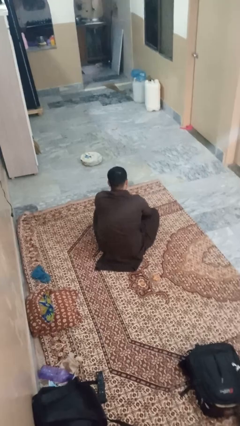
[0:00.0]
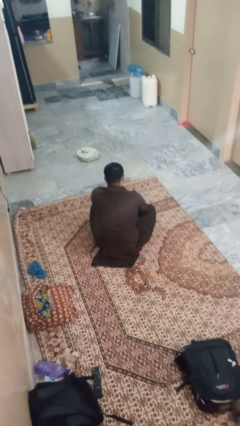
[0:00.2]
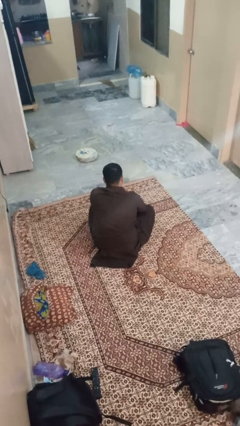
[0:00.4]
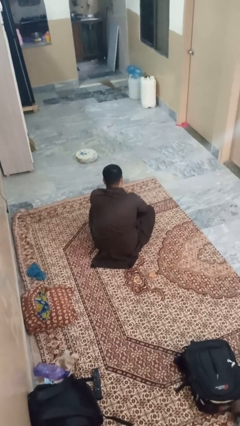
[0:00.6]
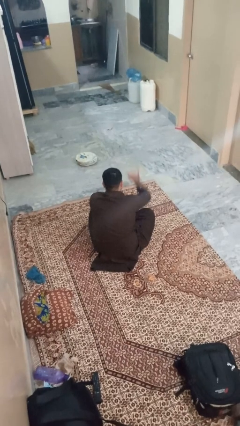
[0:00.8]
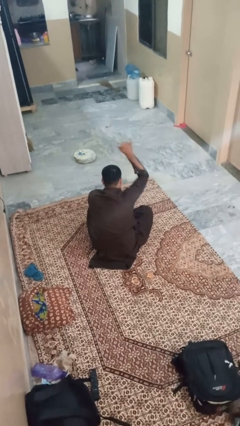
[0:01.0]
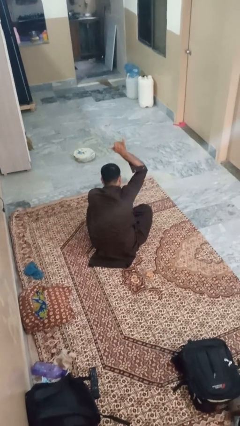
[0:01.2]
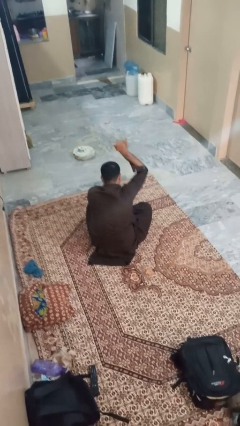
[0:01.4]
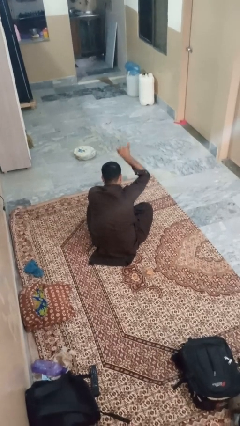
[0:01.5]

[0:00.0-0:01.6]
person gestures hang loose

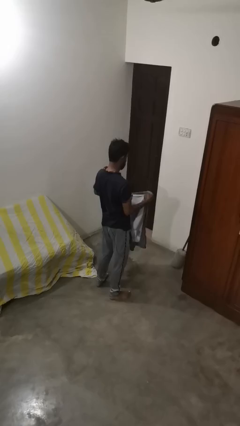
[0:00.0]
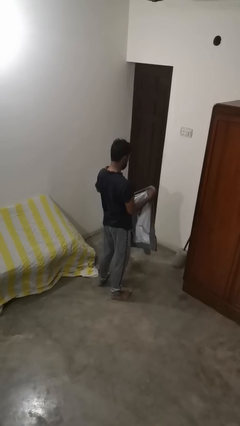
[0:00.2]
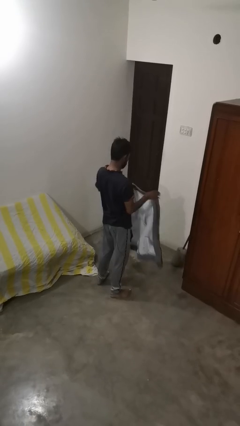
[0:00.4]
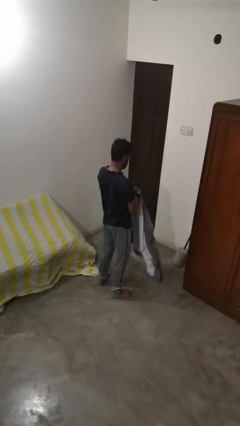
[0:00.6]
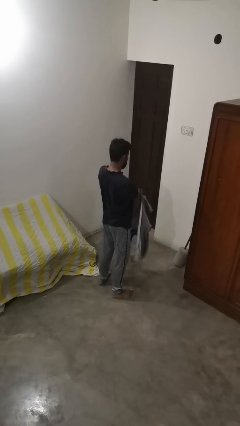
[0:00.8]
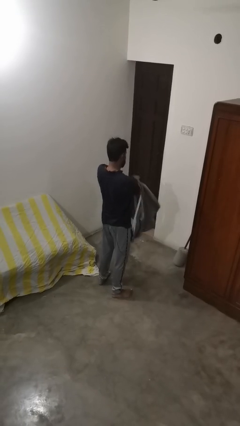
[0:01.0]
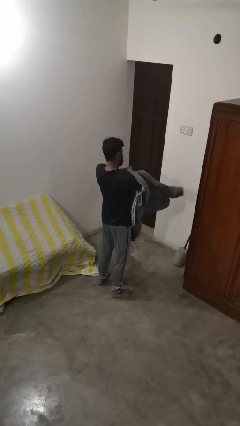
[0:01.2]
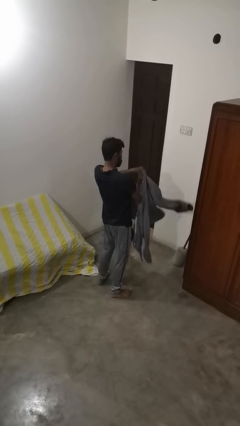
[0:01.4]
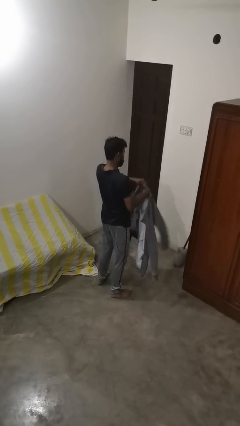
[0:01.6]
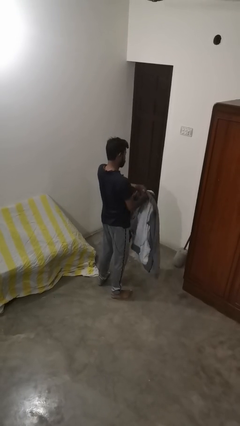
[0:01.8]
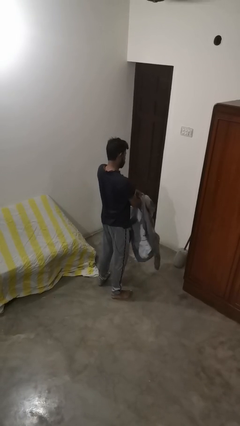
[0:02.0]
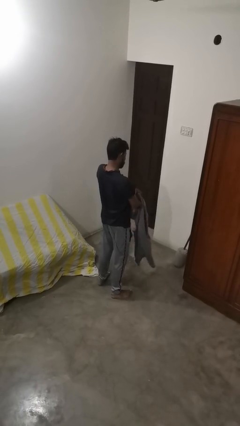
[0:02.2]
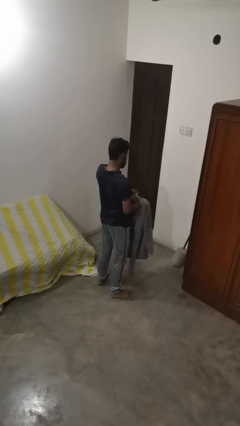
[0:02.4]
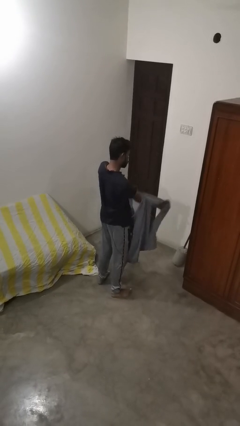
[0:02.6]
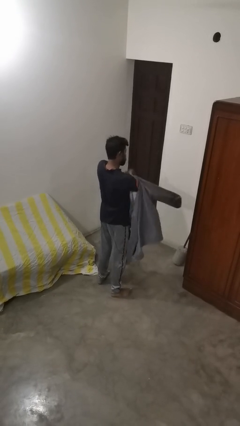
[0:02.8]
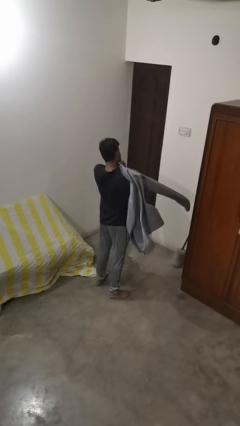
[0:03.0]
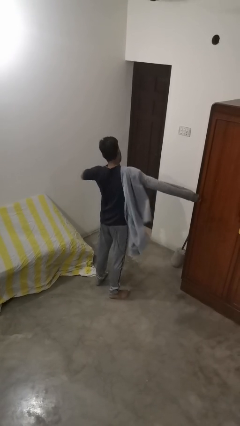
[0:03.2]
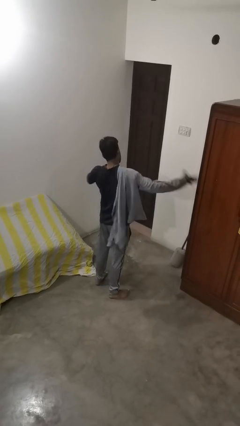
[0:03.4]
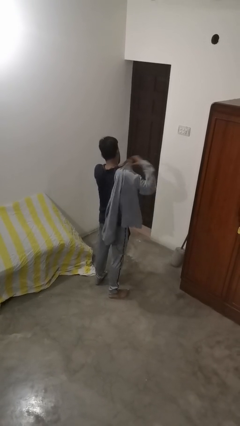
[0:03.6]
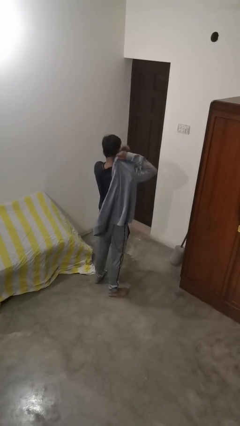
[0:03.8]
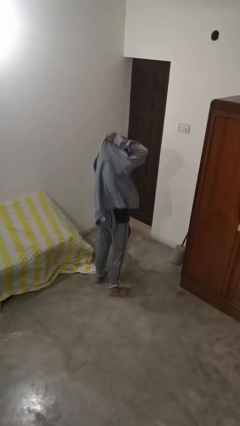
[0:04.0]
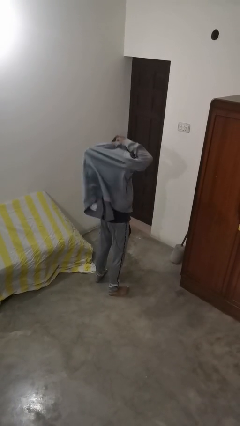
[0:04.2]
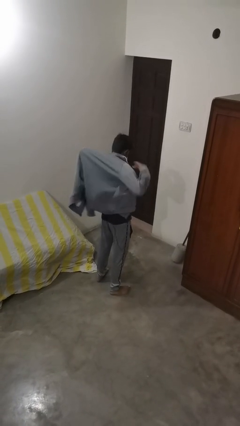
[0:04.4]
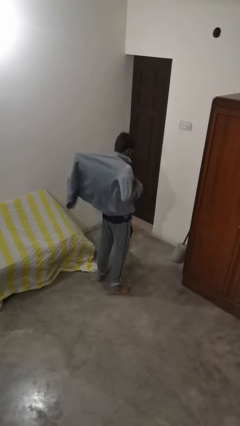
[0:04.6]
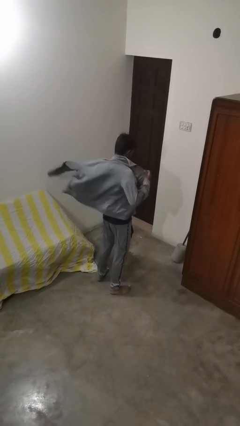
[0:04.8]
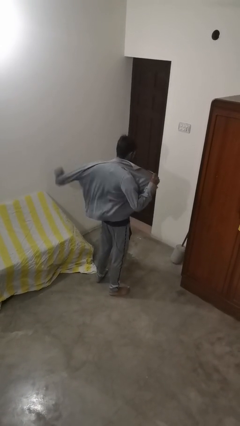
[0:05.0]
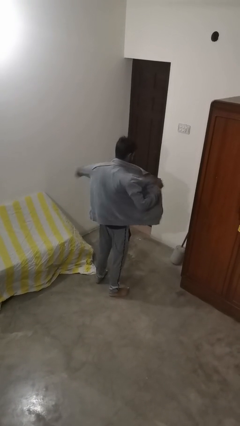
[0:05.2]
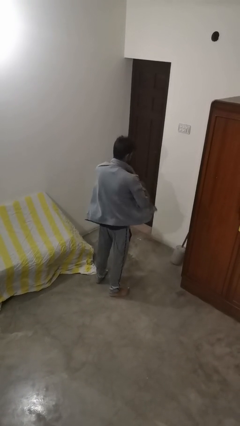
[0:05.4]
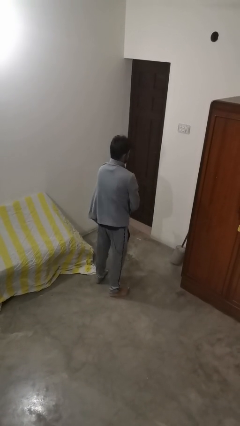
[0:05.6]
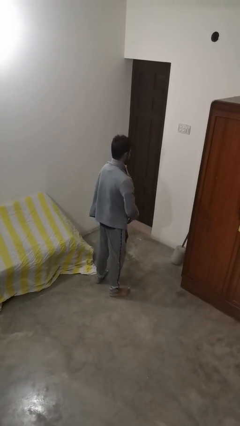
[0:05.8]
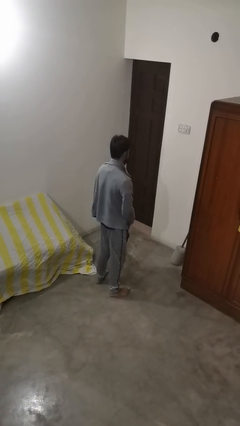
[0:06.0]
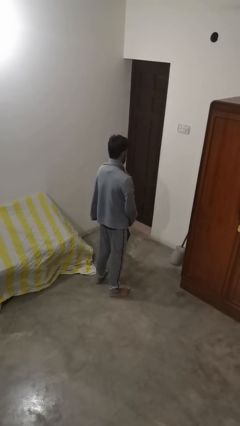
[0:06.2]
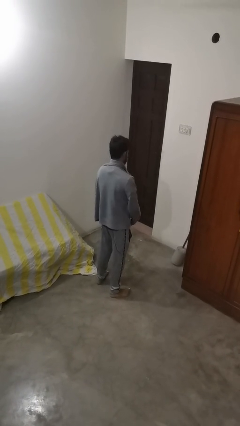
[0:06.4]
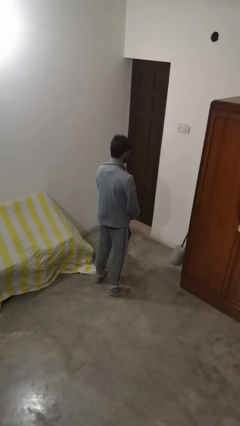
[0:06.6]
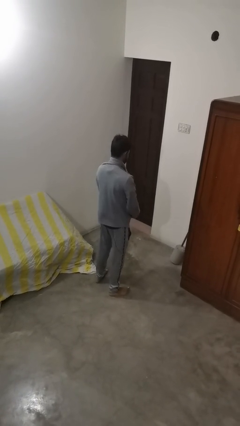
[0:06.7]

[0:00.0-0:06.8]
person puts on jacket

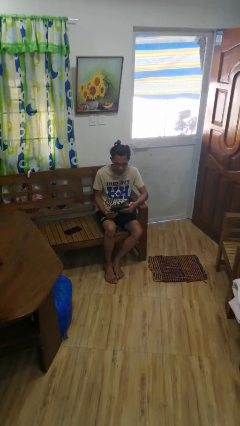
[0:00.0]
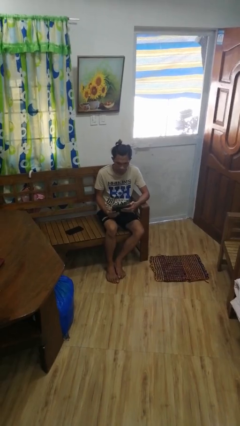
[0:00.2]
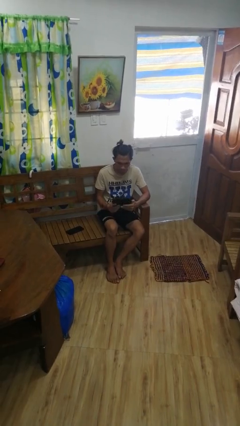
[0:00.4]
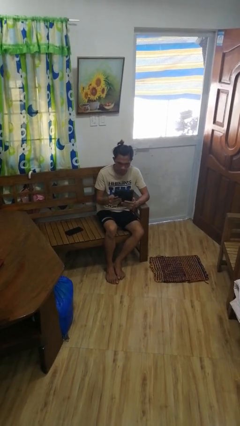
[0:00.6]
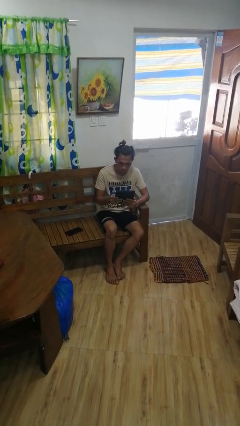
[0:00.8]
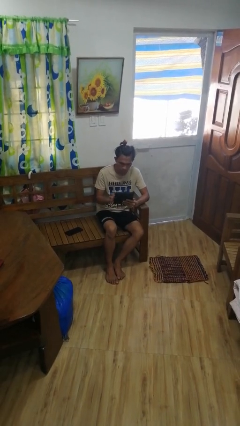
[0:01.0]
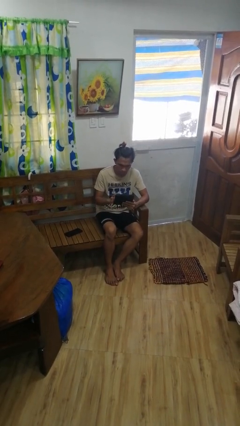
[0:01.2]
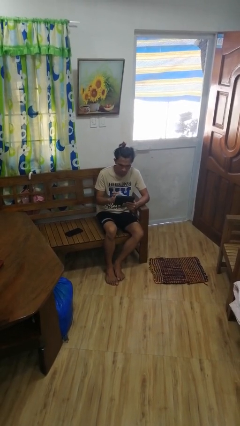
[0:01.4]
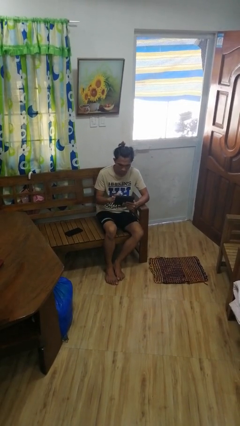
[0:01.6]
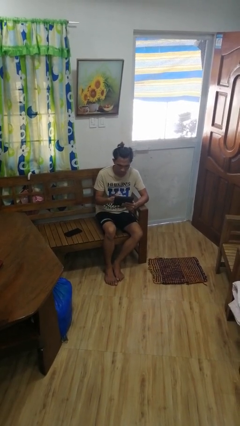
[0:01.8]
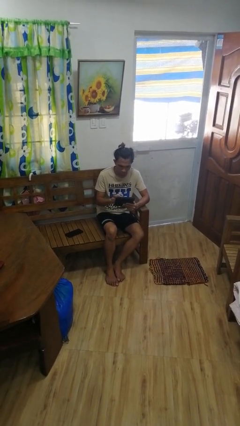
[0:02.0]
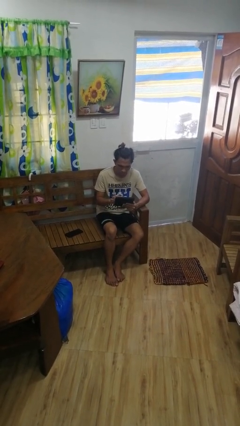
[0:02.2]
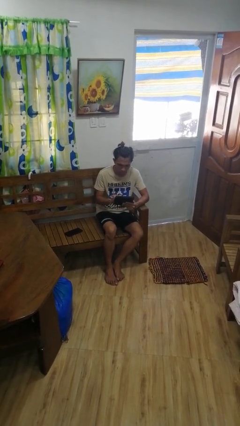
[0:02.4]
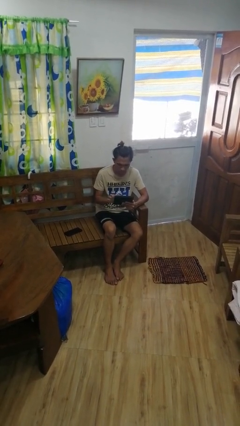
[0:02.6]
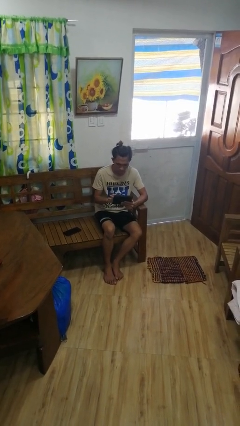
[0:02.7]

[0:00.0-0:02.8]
person interacts with tablet

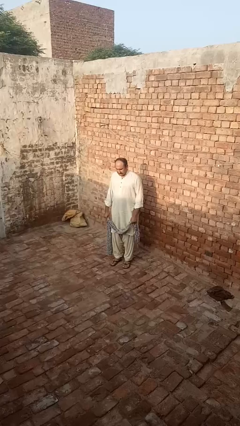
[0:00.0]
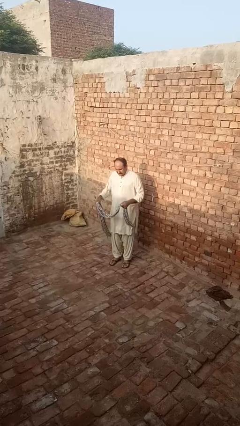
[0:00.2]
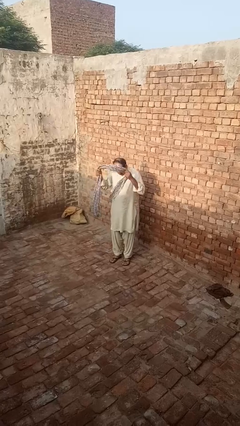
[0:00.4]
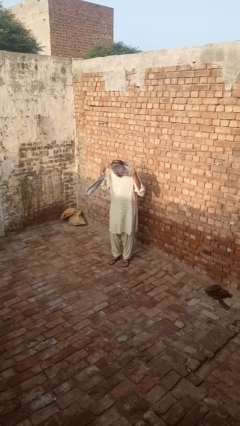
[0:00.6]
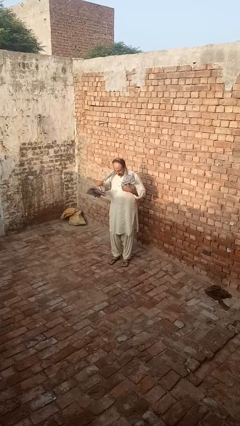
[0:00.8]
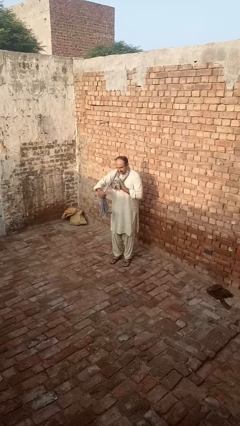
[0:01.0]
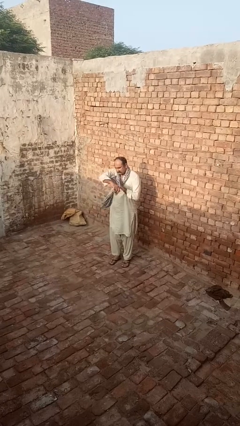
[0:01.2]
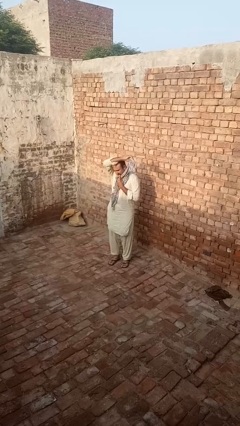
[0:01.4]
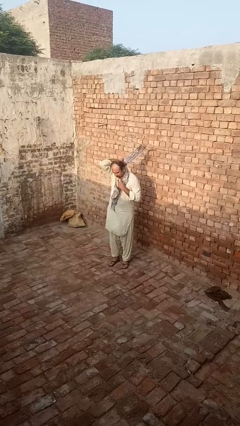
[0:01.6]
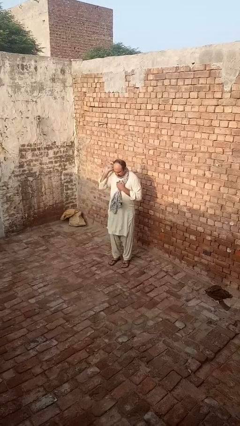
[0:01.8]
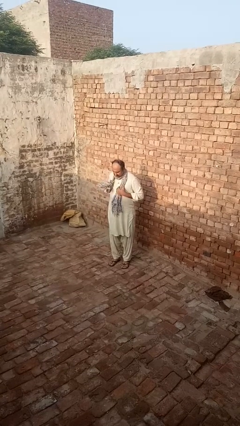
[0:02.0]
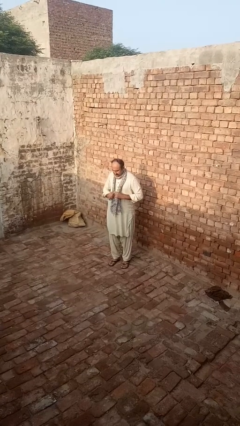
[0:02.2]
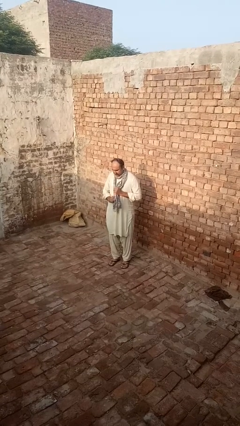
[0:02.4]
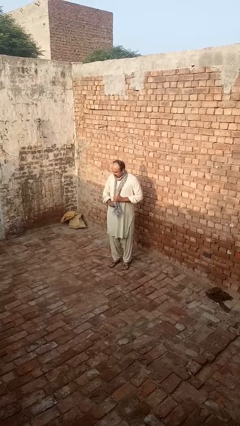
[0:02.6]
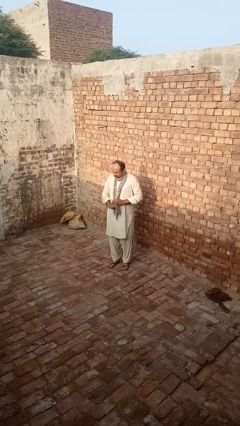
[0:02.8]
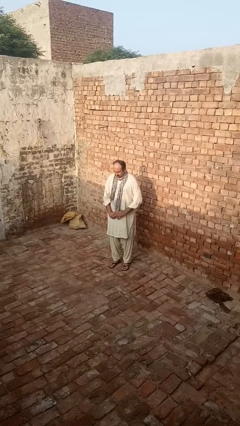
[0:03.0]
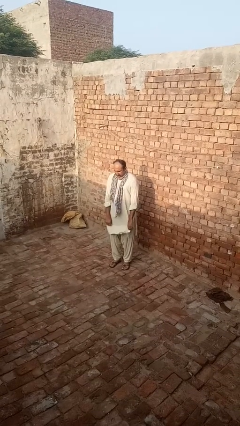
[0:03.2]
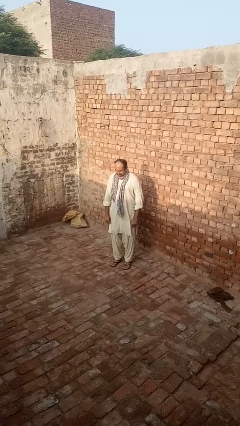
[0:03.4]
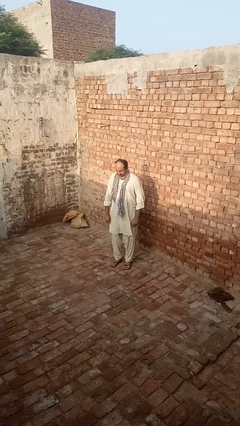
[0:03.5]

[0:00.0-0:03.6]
person puts on scarf

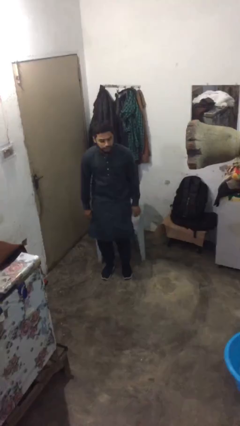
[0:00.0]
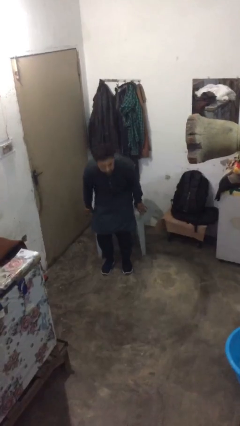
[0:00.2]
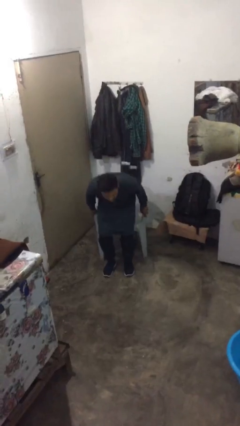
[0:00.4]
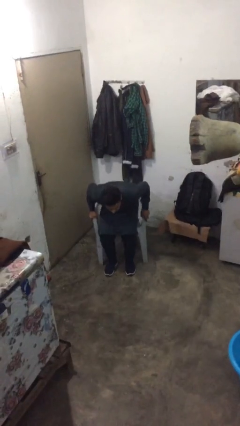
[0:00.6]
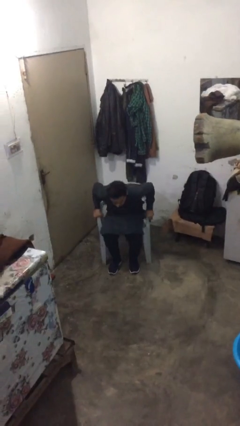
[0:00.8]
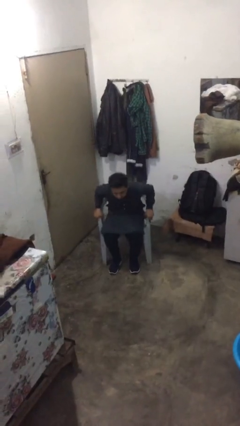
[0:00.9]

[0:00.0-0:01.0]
person sits down

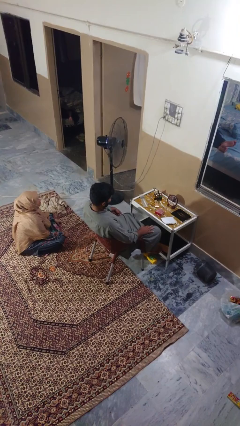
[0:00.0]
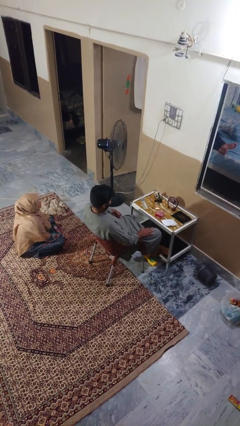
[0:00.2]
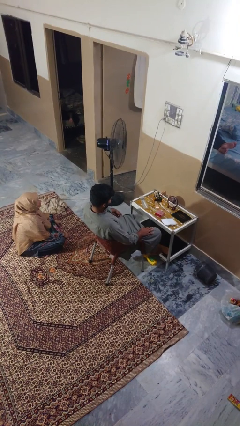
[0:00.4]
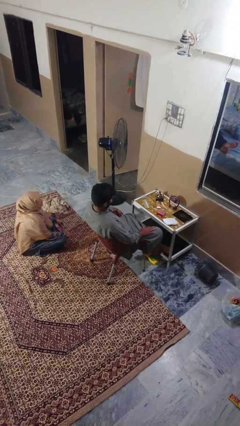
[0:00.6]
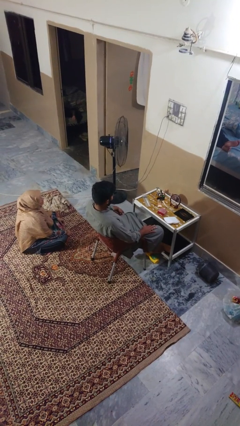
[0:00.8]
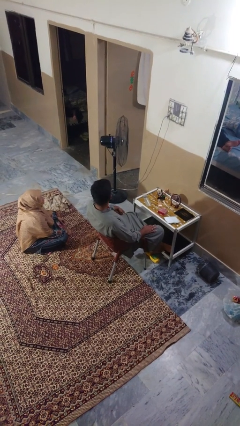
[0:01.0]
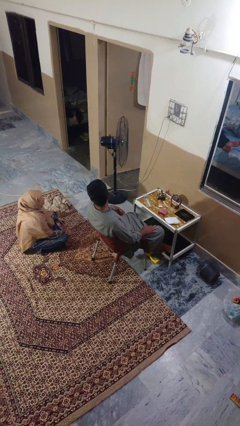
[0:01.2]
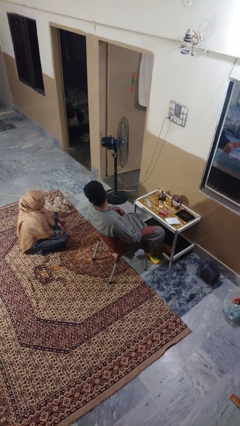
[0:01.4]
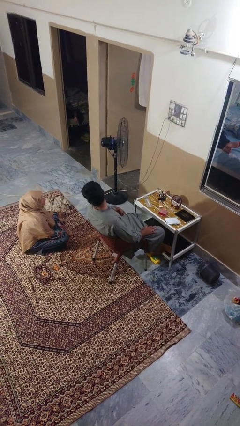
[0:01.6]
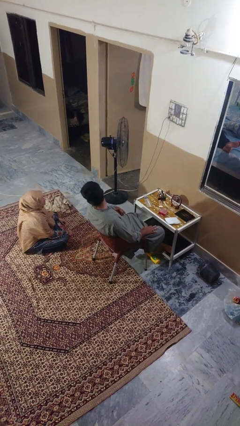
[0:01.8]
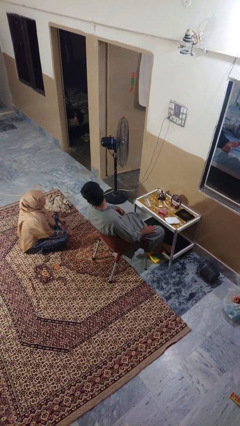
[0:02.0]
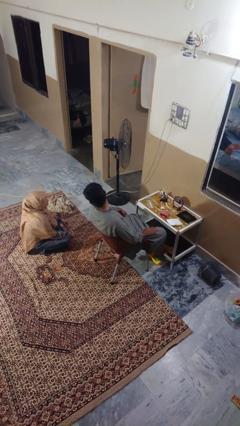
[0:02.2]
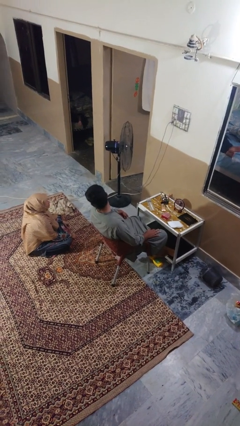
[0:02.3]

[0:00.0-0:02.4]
person looks over shoulder
